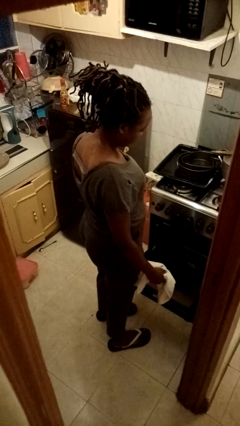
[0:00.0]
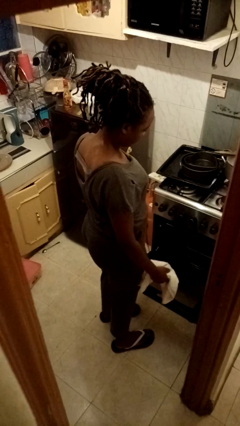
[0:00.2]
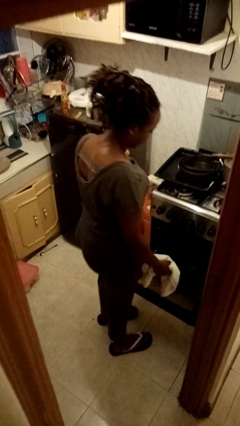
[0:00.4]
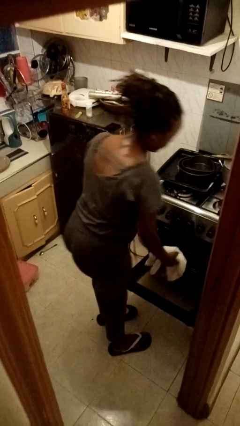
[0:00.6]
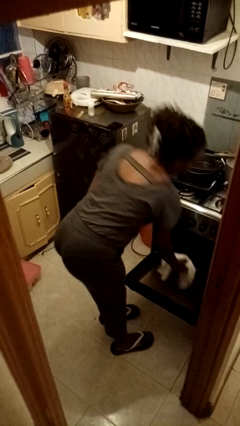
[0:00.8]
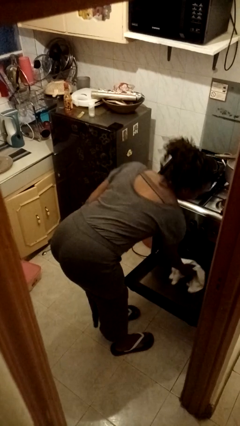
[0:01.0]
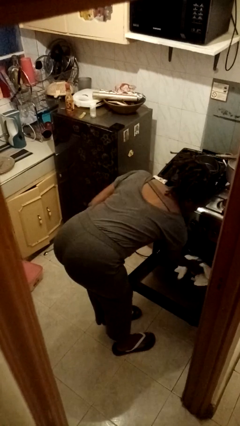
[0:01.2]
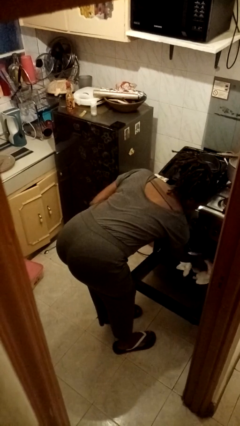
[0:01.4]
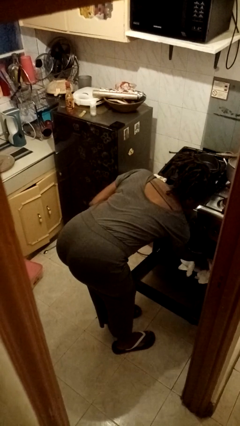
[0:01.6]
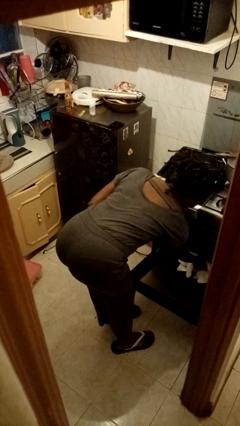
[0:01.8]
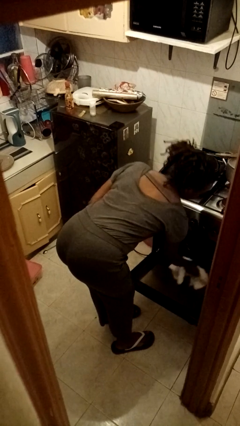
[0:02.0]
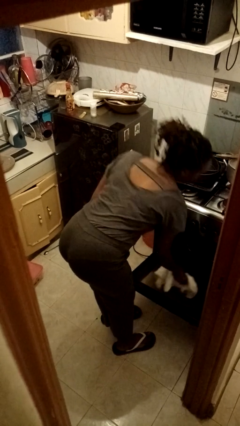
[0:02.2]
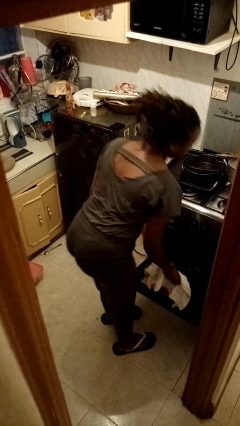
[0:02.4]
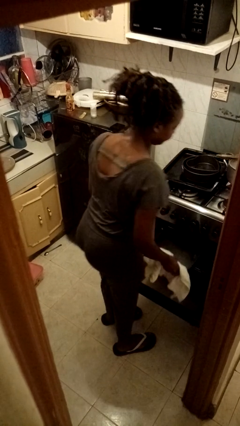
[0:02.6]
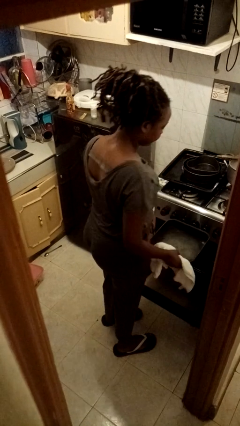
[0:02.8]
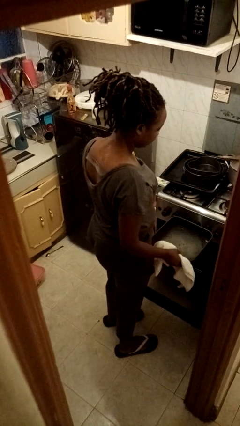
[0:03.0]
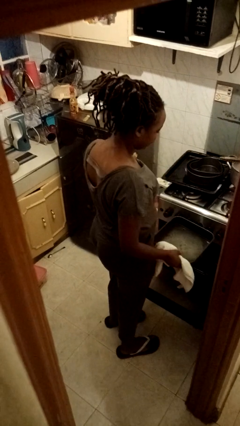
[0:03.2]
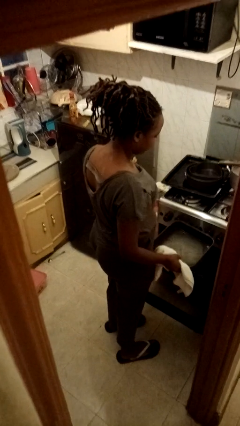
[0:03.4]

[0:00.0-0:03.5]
person takes object from oven

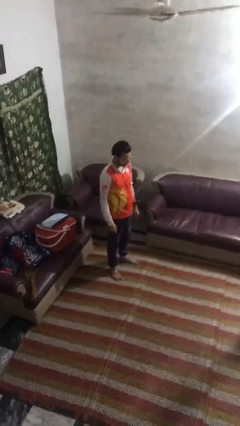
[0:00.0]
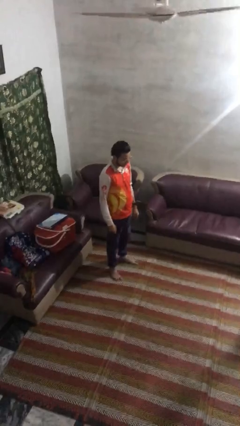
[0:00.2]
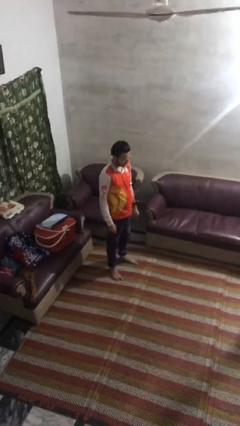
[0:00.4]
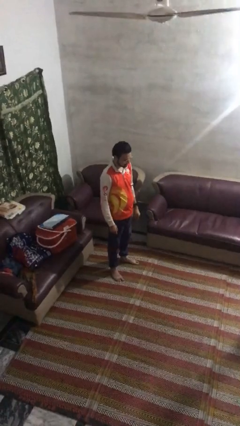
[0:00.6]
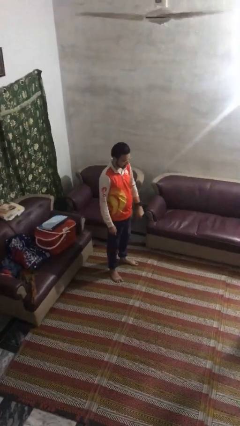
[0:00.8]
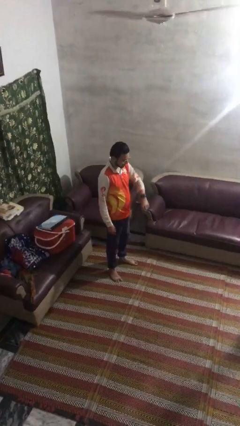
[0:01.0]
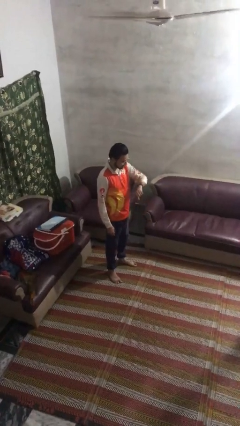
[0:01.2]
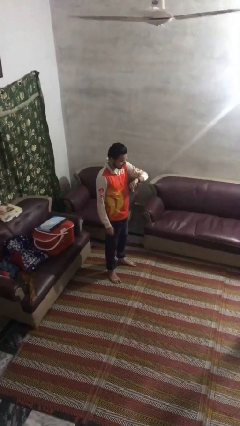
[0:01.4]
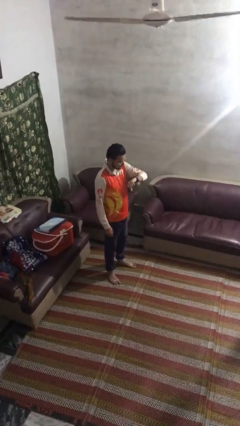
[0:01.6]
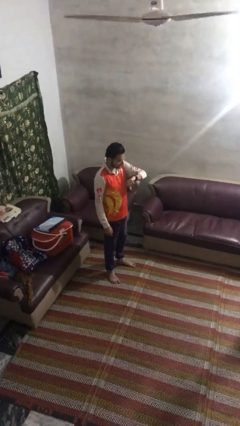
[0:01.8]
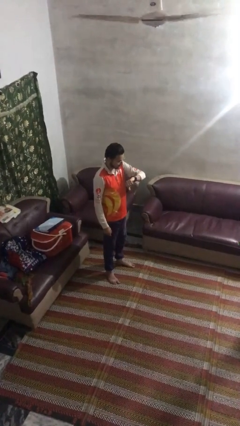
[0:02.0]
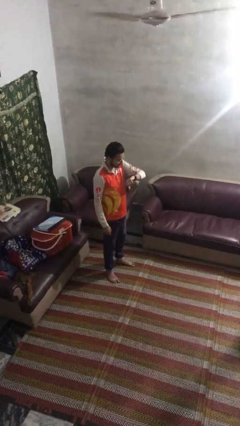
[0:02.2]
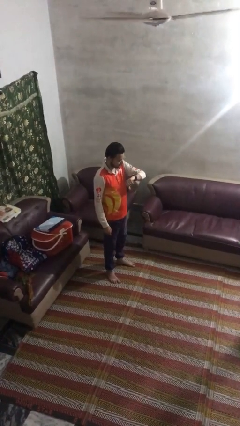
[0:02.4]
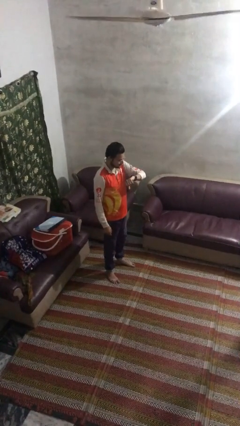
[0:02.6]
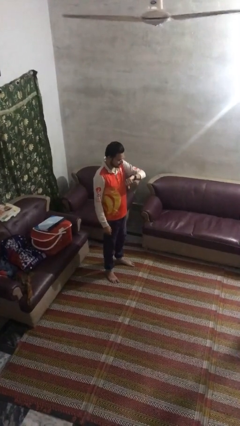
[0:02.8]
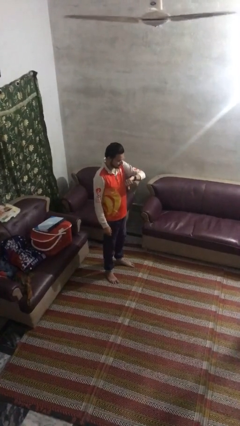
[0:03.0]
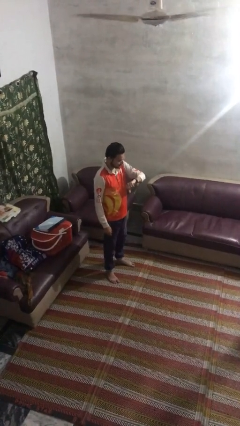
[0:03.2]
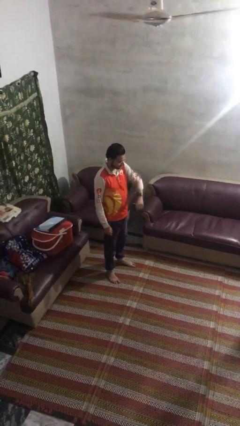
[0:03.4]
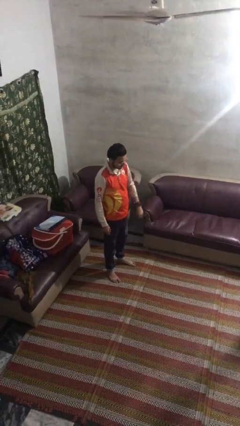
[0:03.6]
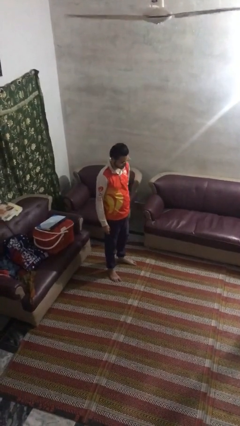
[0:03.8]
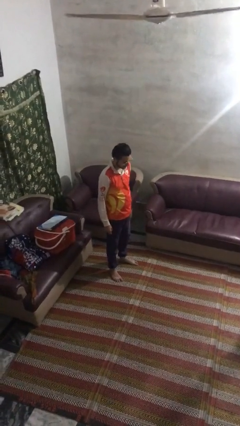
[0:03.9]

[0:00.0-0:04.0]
person looks at wristwatch

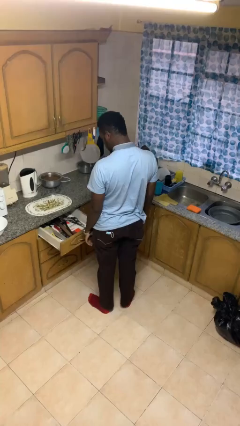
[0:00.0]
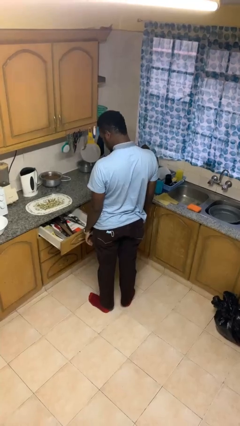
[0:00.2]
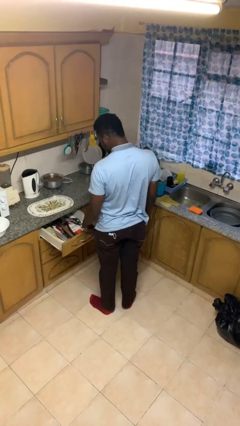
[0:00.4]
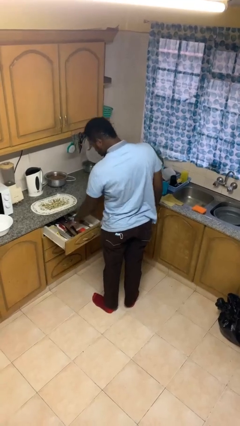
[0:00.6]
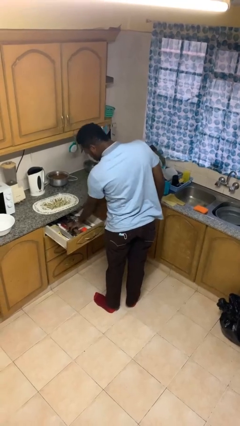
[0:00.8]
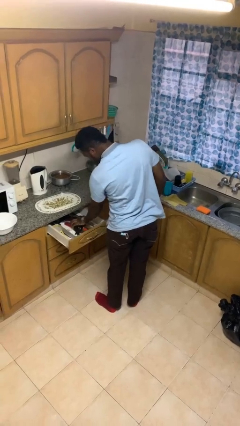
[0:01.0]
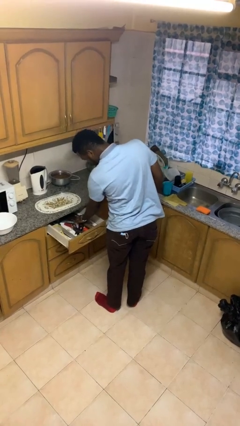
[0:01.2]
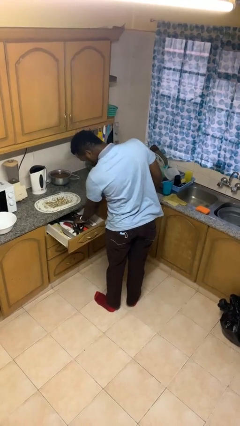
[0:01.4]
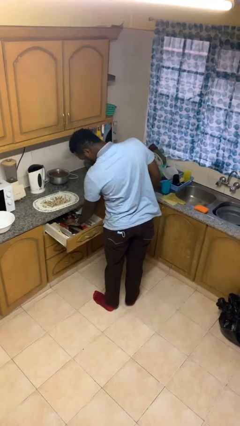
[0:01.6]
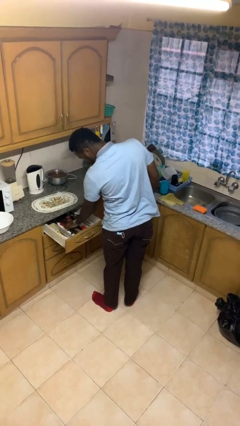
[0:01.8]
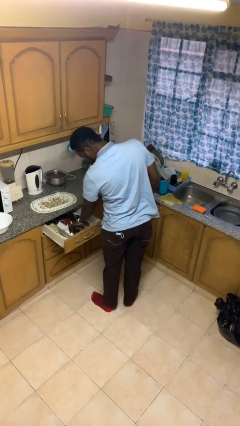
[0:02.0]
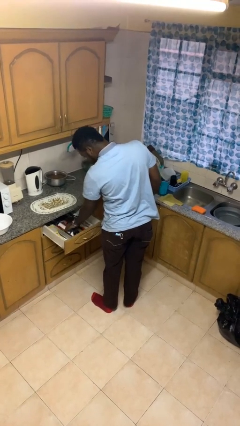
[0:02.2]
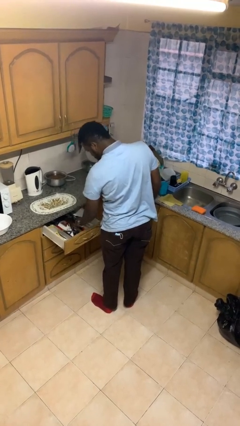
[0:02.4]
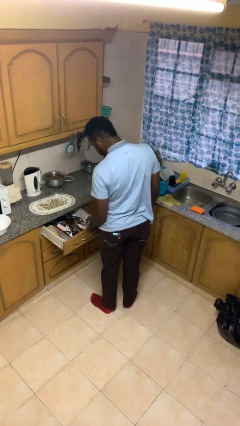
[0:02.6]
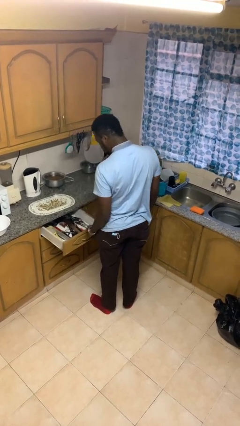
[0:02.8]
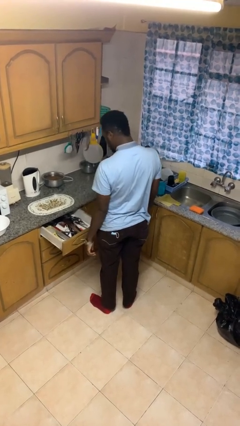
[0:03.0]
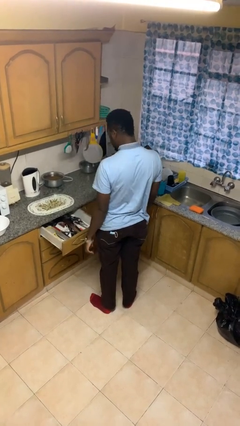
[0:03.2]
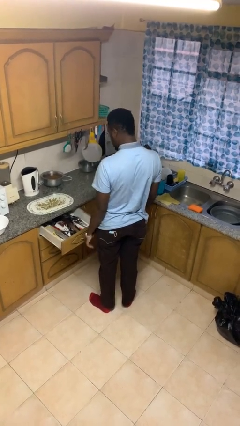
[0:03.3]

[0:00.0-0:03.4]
person searches in kitchen drawer

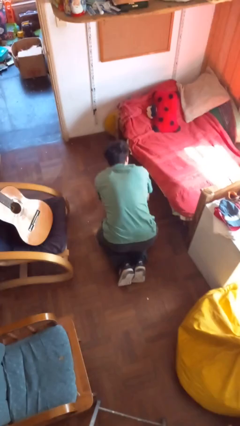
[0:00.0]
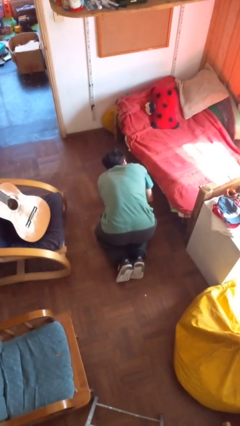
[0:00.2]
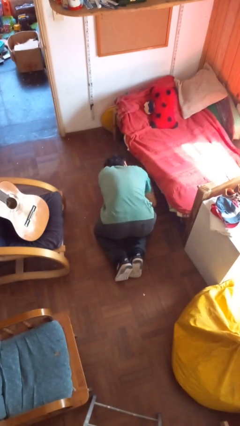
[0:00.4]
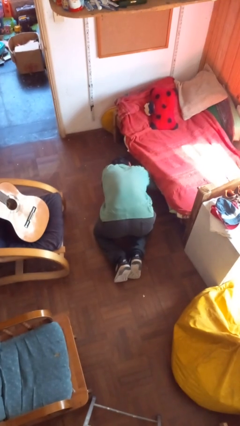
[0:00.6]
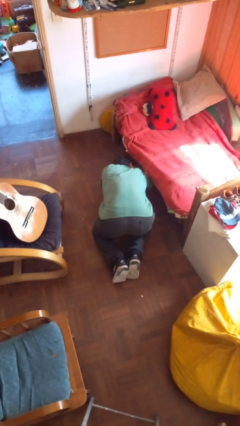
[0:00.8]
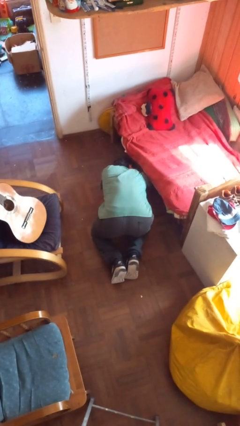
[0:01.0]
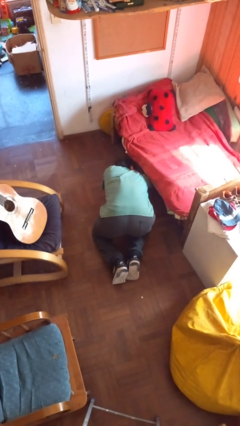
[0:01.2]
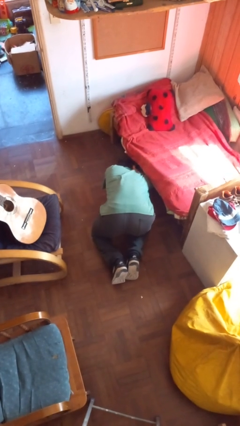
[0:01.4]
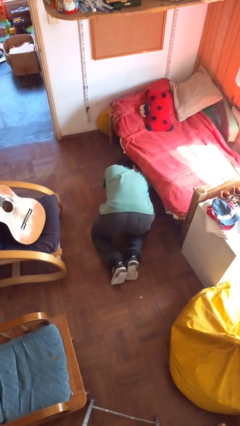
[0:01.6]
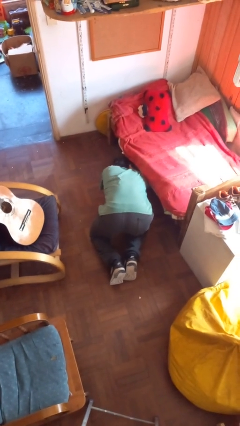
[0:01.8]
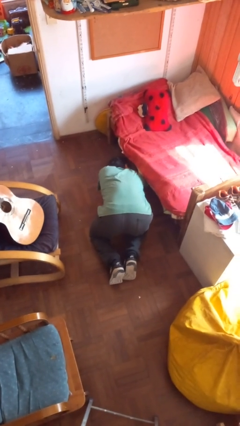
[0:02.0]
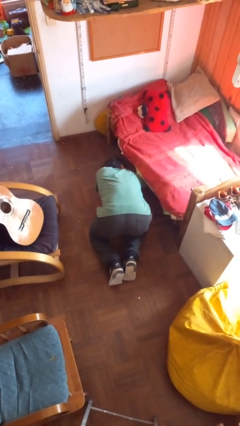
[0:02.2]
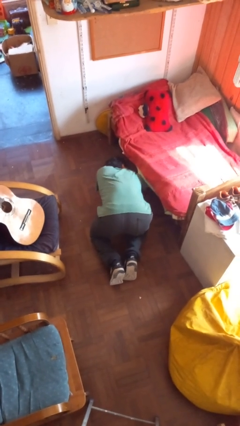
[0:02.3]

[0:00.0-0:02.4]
person searches under bed

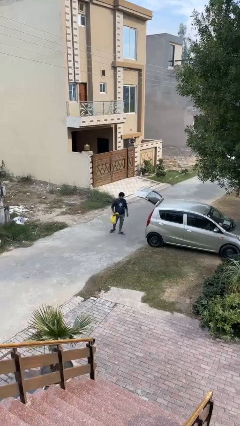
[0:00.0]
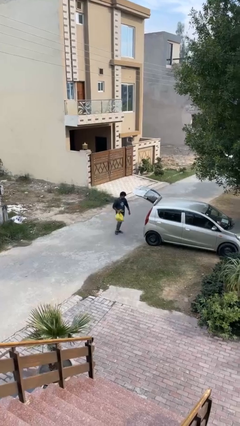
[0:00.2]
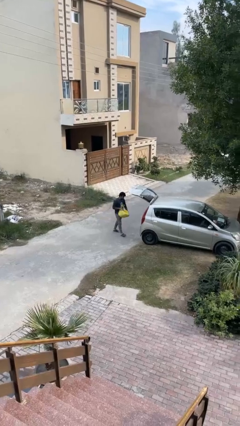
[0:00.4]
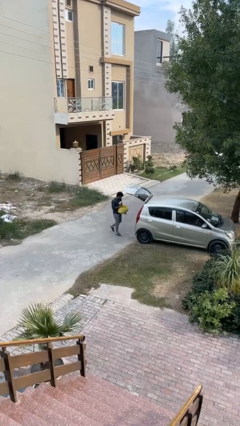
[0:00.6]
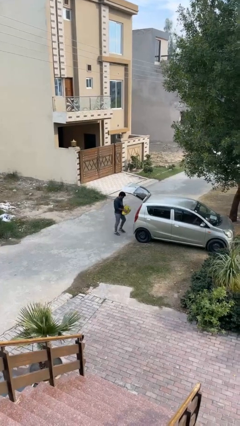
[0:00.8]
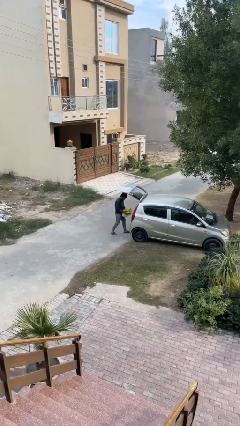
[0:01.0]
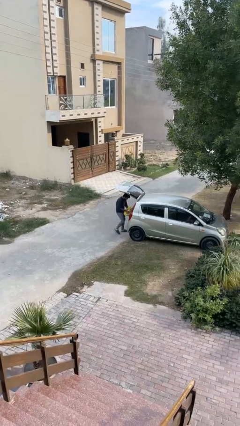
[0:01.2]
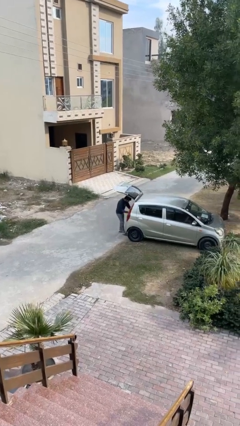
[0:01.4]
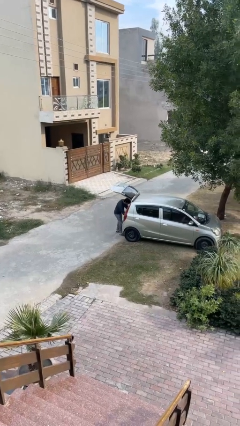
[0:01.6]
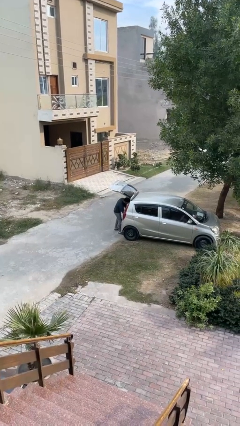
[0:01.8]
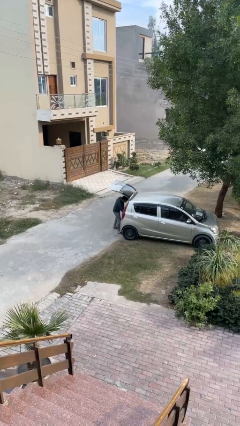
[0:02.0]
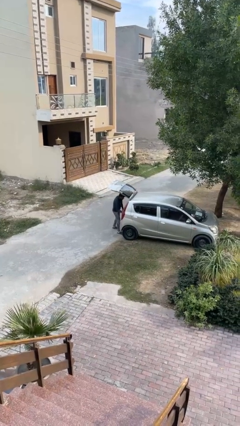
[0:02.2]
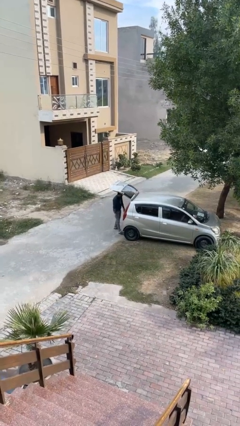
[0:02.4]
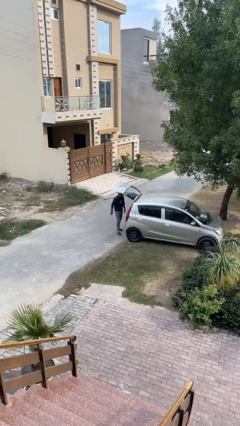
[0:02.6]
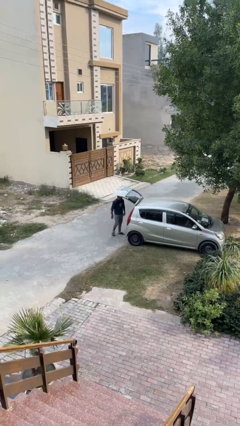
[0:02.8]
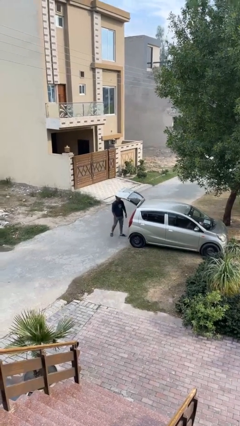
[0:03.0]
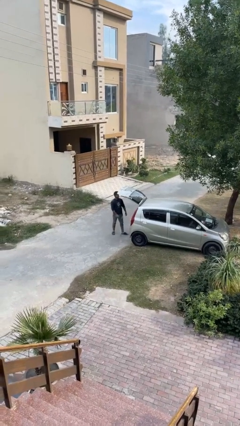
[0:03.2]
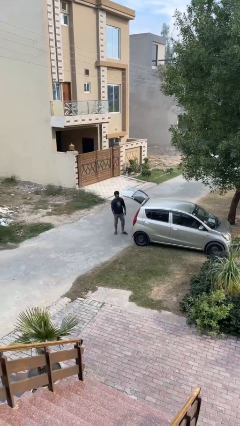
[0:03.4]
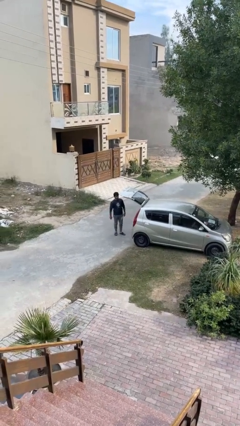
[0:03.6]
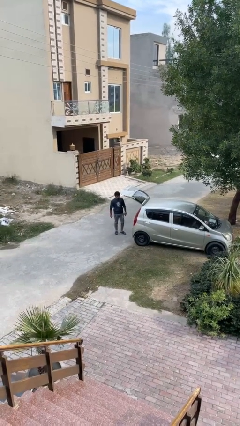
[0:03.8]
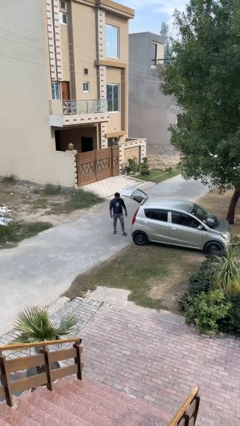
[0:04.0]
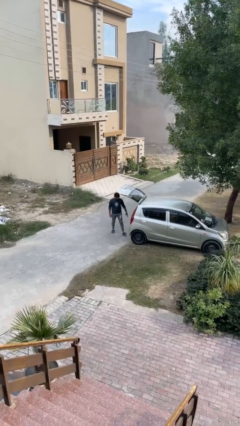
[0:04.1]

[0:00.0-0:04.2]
person loads car

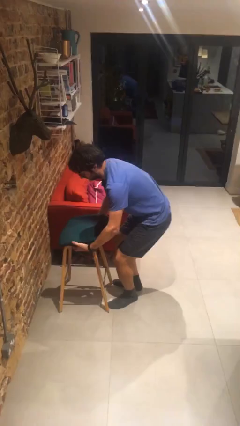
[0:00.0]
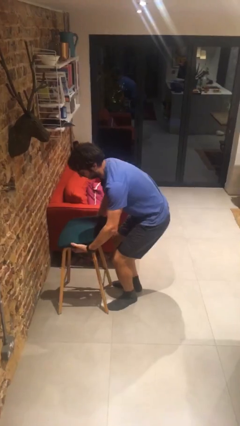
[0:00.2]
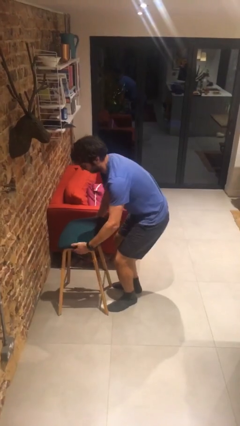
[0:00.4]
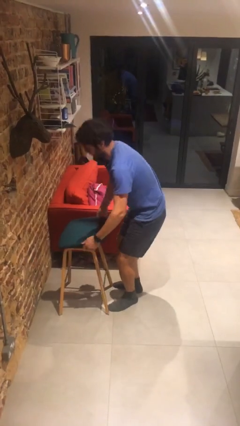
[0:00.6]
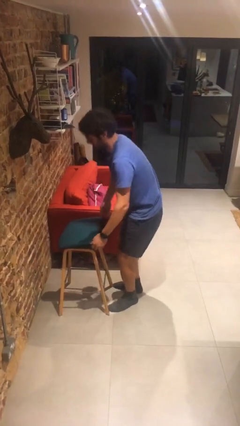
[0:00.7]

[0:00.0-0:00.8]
person puts down object on floor
